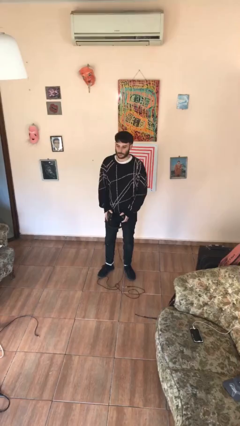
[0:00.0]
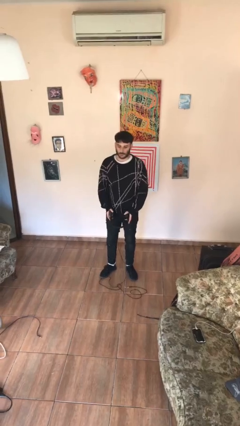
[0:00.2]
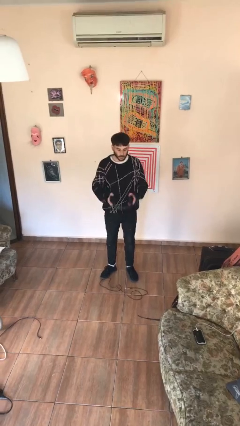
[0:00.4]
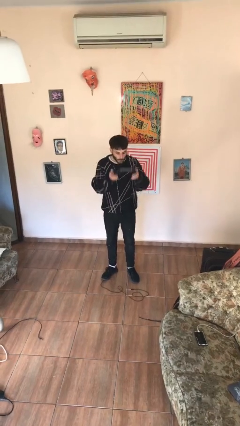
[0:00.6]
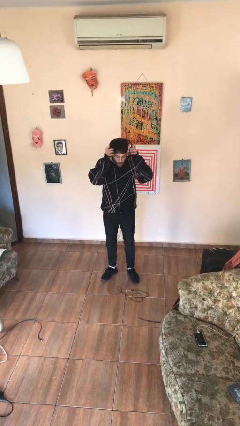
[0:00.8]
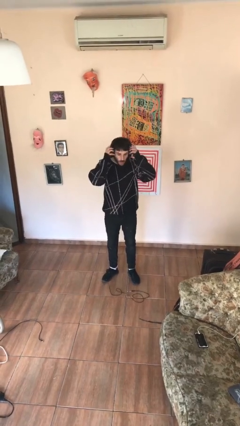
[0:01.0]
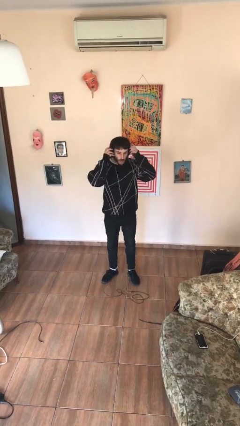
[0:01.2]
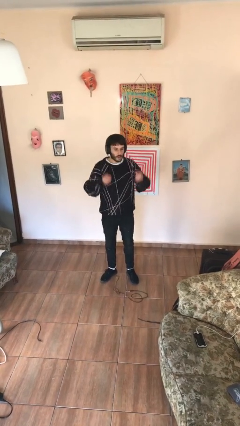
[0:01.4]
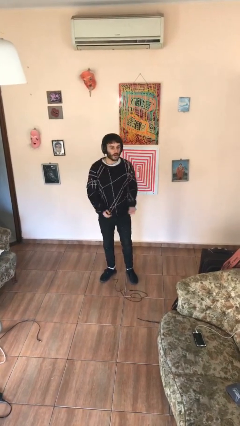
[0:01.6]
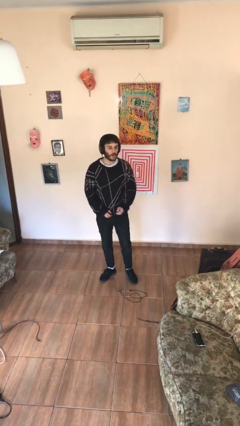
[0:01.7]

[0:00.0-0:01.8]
person puts on headphones

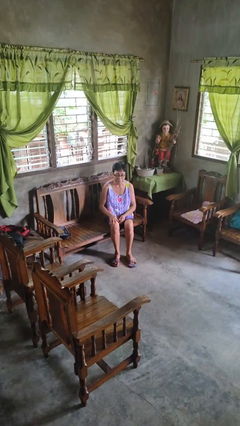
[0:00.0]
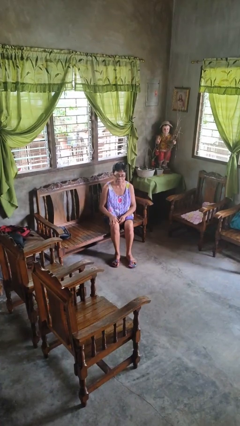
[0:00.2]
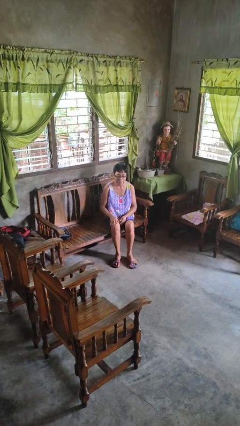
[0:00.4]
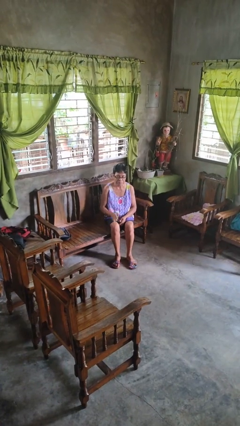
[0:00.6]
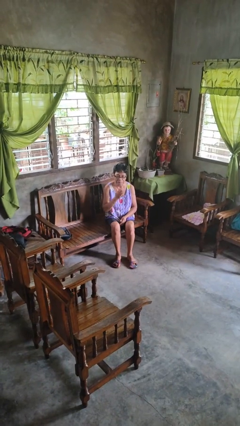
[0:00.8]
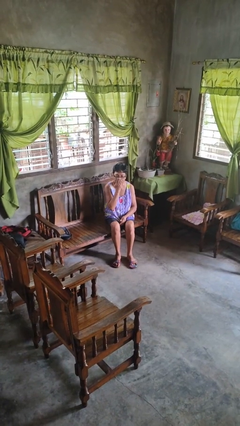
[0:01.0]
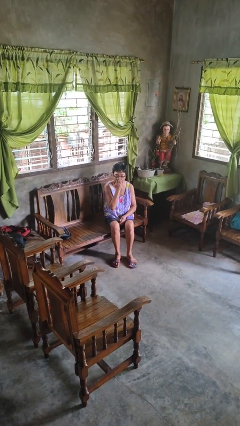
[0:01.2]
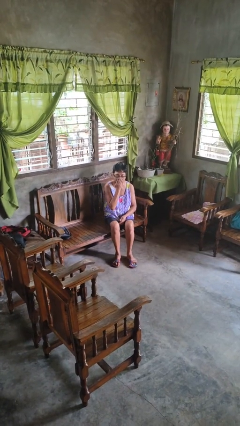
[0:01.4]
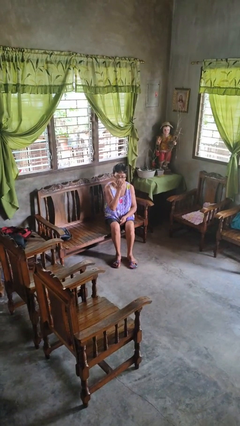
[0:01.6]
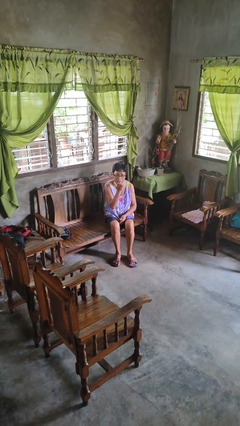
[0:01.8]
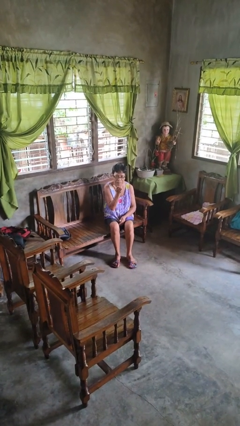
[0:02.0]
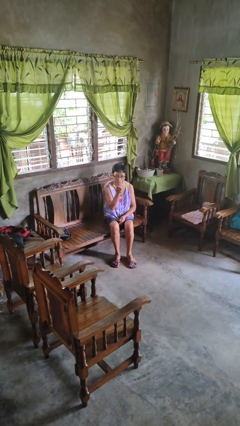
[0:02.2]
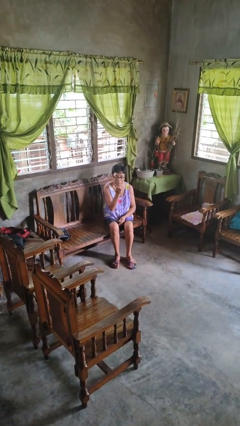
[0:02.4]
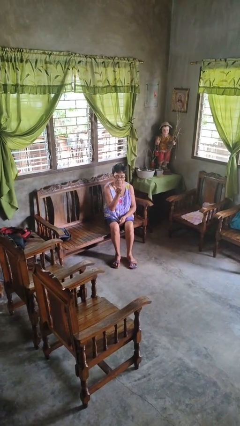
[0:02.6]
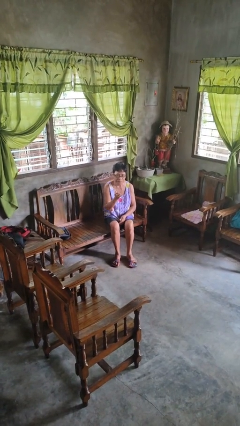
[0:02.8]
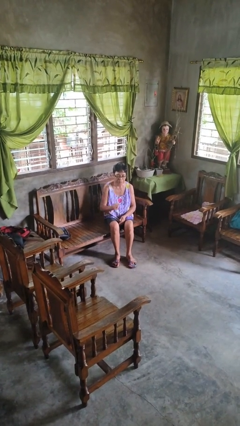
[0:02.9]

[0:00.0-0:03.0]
person gestures blow kiss

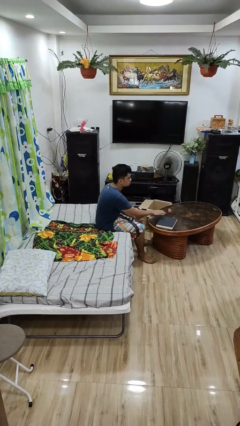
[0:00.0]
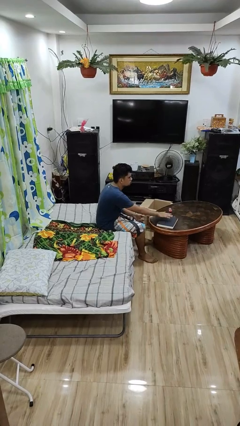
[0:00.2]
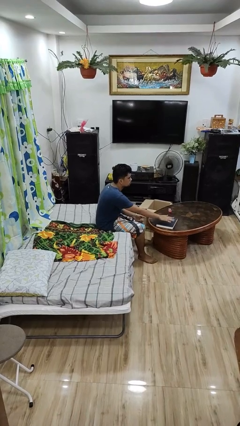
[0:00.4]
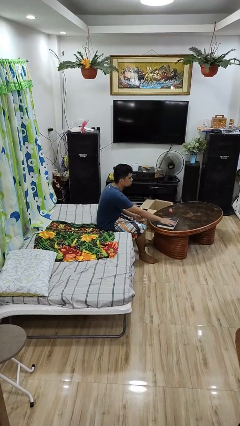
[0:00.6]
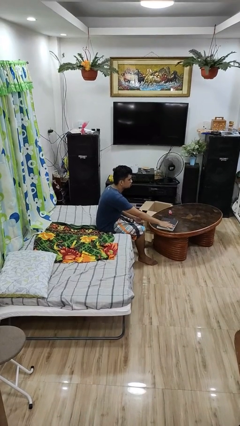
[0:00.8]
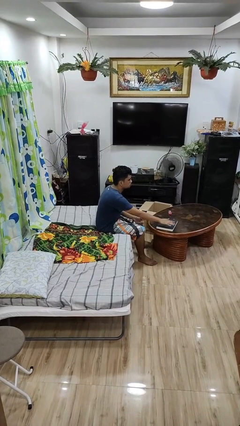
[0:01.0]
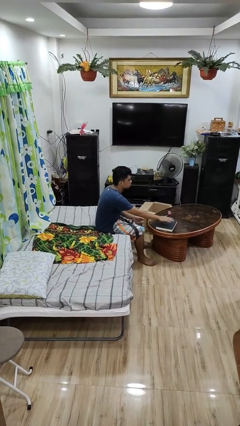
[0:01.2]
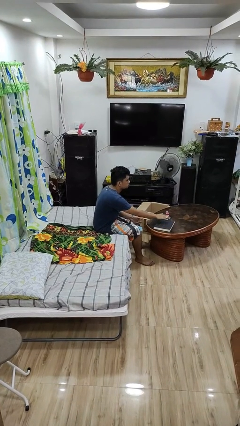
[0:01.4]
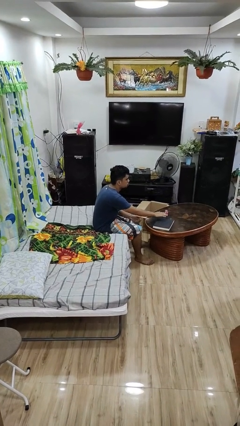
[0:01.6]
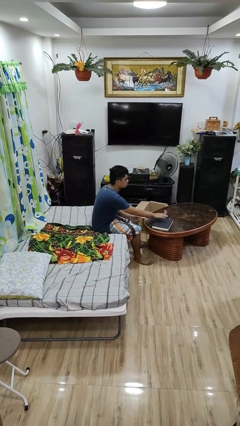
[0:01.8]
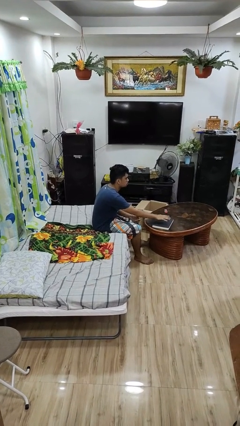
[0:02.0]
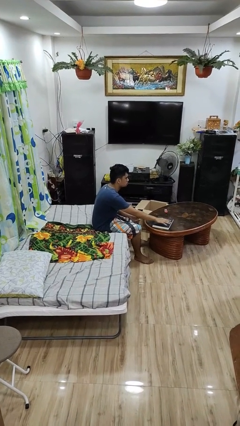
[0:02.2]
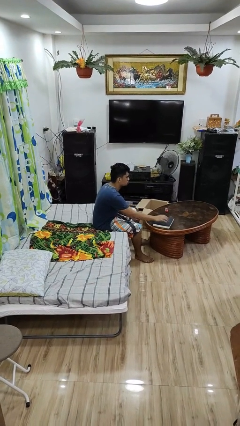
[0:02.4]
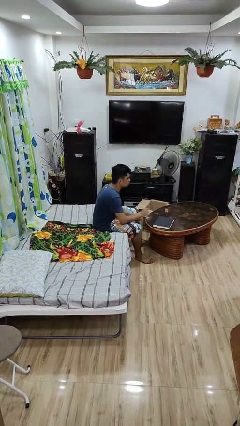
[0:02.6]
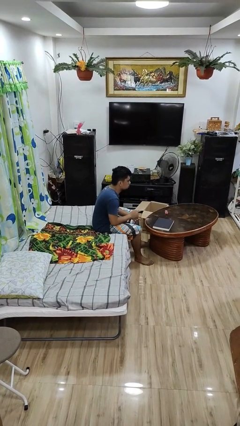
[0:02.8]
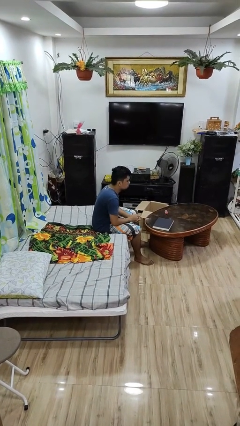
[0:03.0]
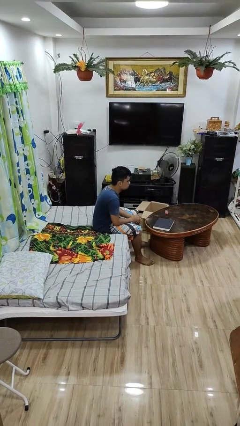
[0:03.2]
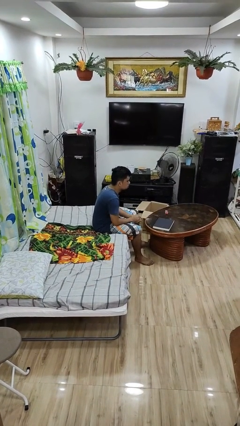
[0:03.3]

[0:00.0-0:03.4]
person waves hand over object

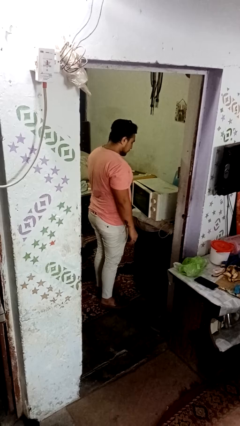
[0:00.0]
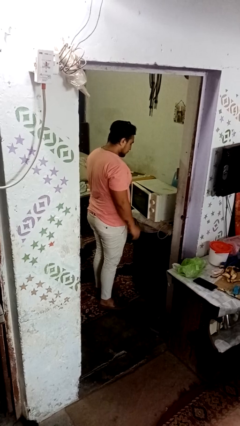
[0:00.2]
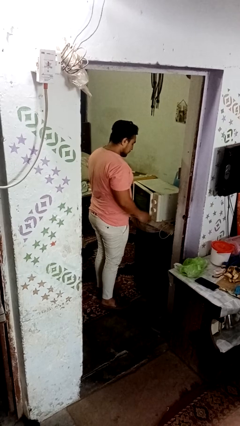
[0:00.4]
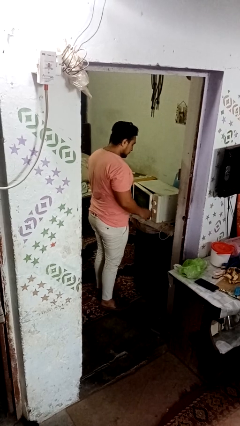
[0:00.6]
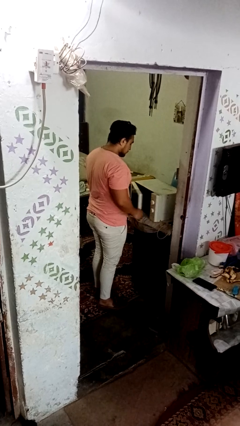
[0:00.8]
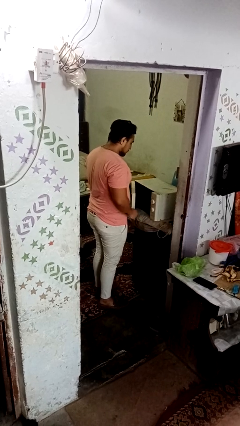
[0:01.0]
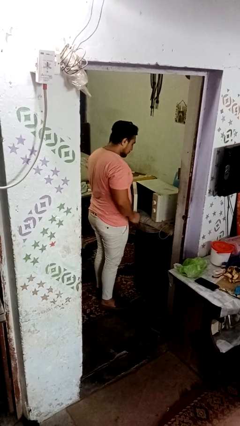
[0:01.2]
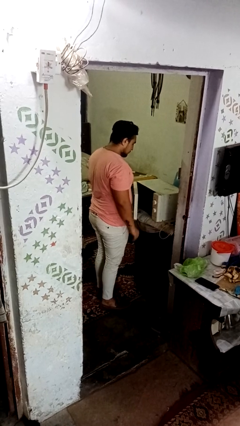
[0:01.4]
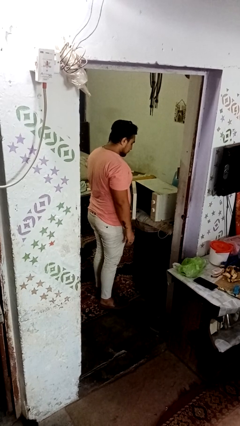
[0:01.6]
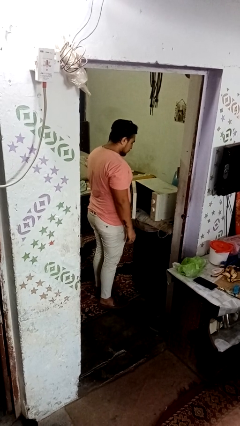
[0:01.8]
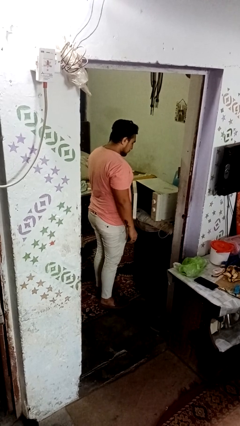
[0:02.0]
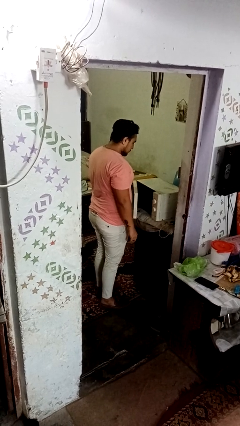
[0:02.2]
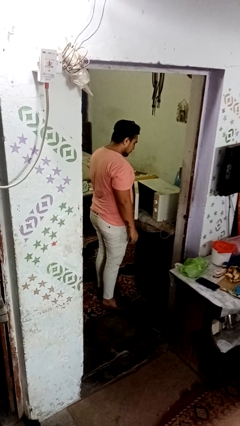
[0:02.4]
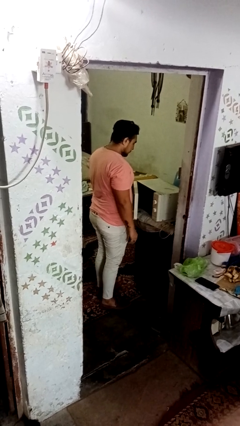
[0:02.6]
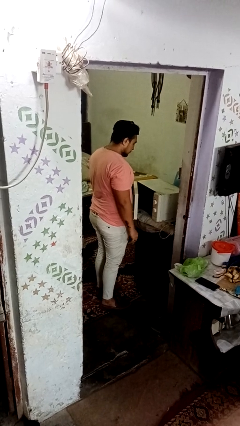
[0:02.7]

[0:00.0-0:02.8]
person opens dishwasher

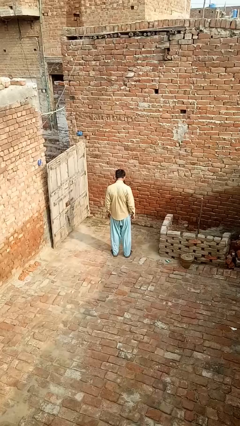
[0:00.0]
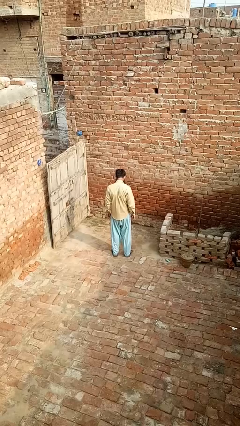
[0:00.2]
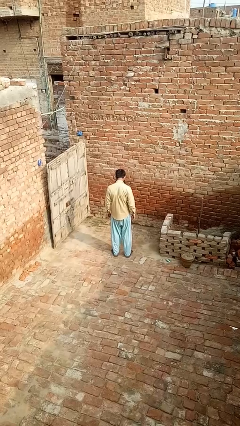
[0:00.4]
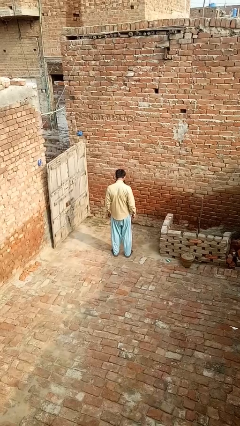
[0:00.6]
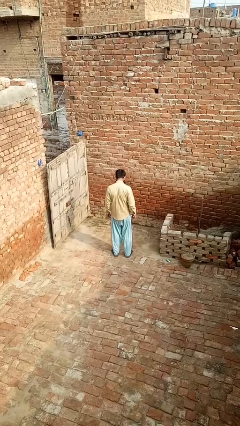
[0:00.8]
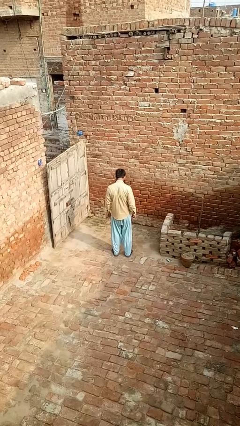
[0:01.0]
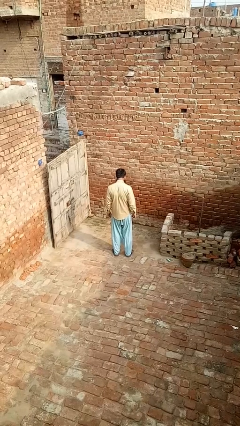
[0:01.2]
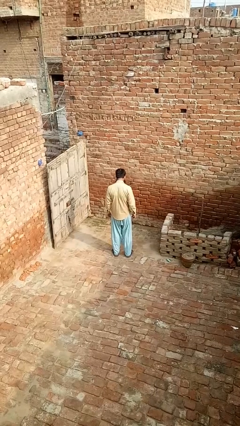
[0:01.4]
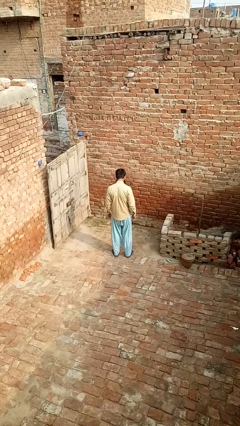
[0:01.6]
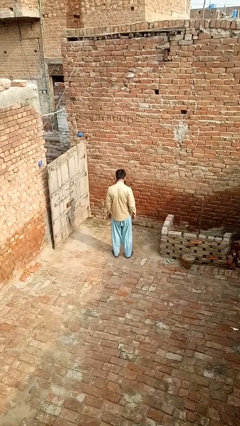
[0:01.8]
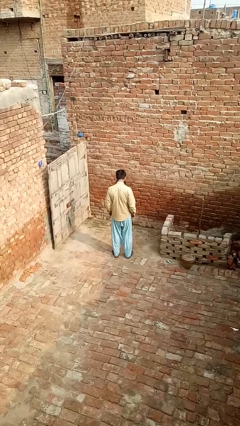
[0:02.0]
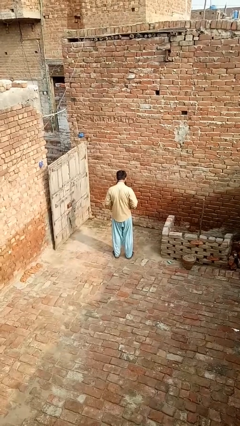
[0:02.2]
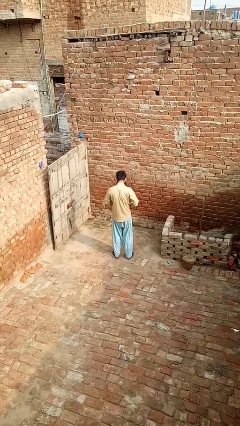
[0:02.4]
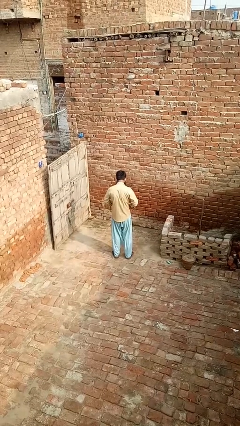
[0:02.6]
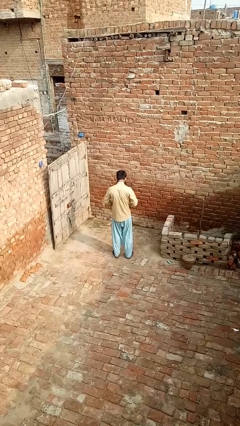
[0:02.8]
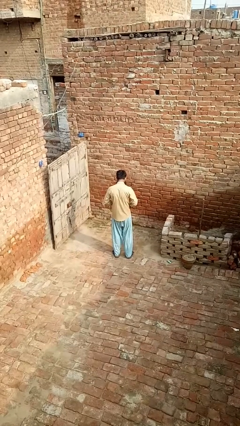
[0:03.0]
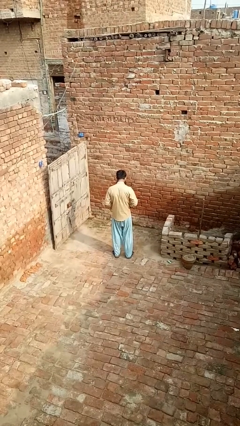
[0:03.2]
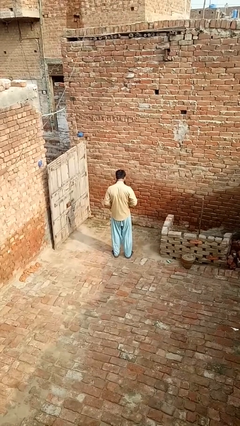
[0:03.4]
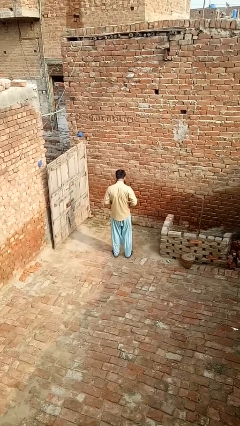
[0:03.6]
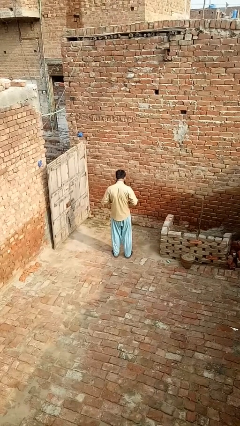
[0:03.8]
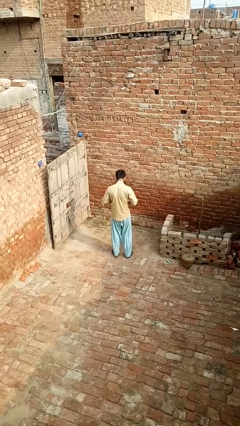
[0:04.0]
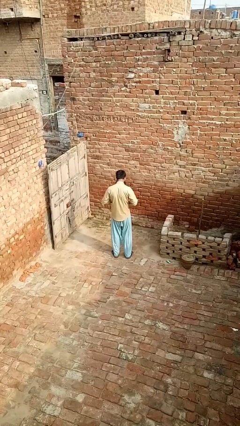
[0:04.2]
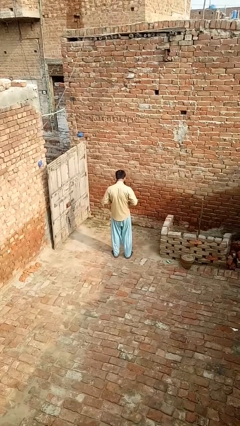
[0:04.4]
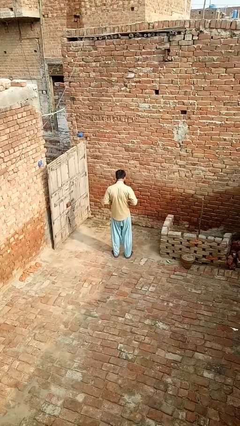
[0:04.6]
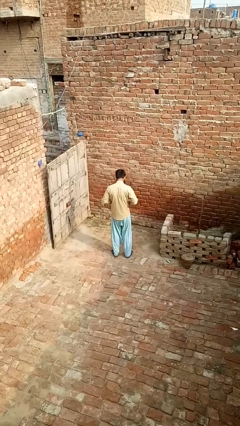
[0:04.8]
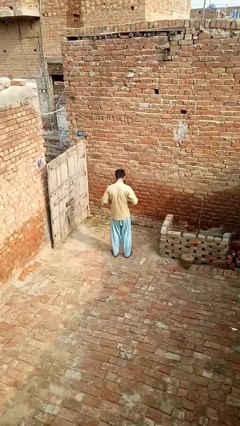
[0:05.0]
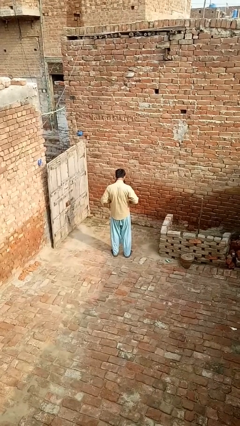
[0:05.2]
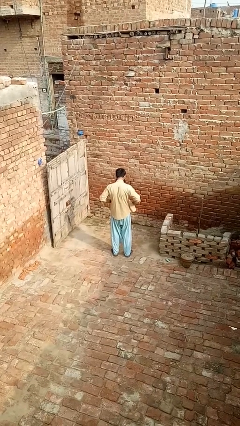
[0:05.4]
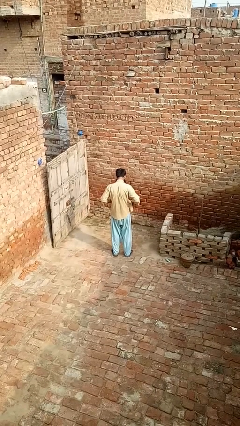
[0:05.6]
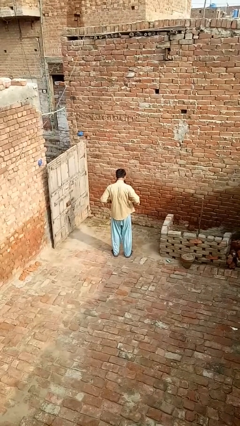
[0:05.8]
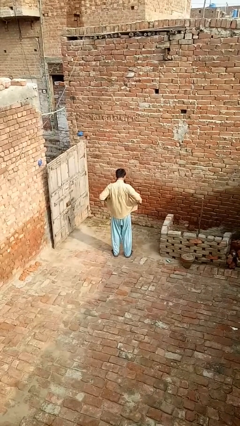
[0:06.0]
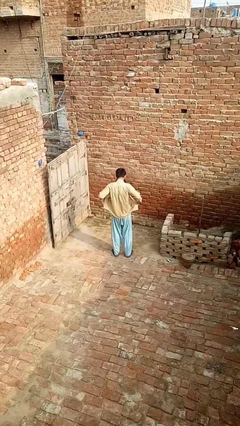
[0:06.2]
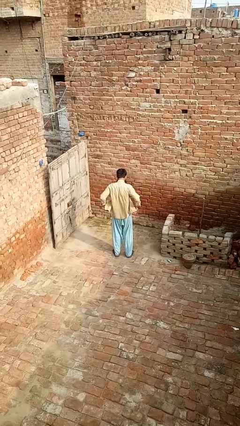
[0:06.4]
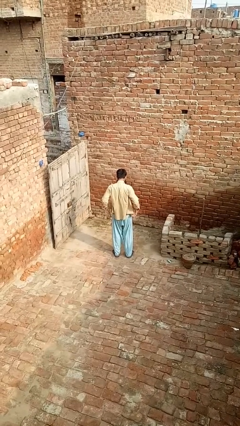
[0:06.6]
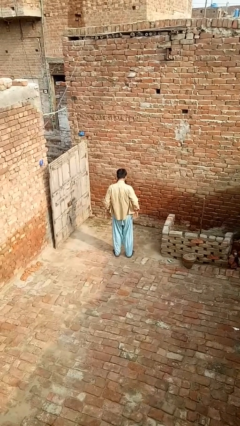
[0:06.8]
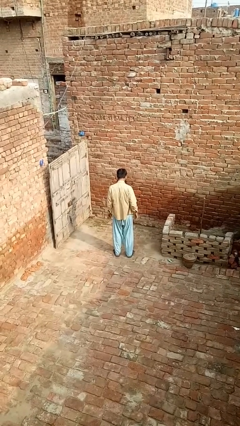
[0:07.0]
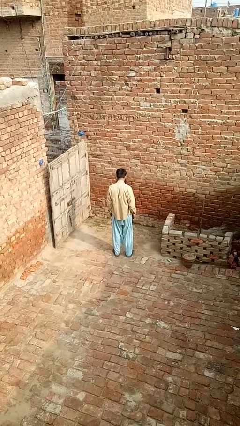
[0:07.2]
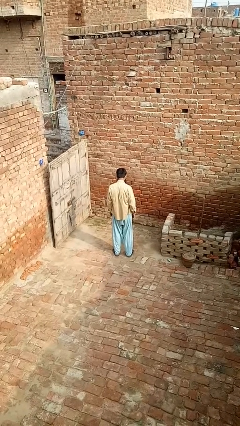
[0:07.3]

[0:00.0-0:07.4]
person unbuttons shirt
